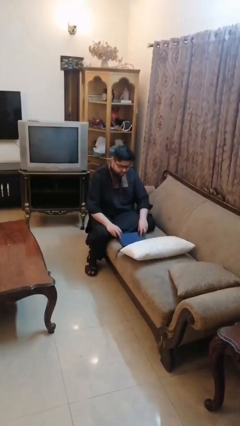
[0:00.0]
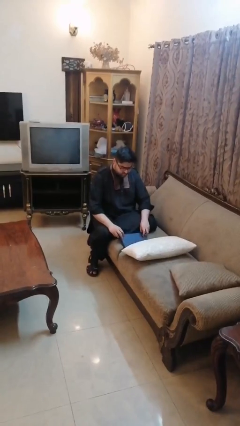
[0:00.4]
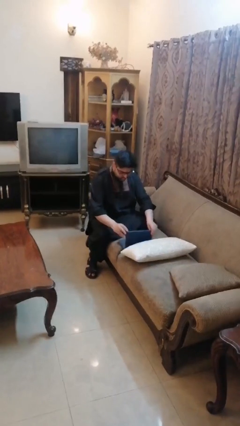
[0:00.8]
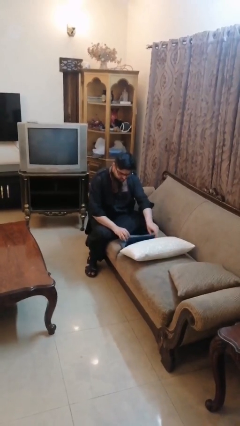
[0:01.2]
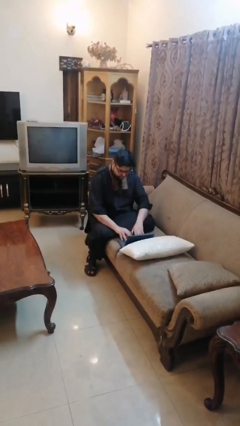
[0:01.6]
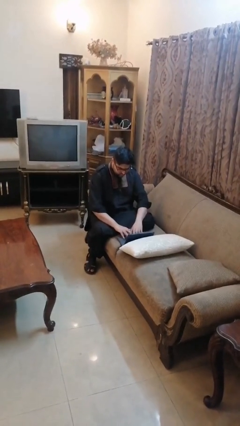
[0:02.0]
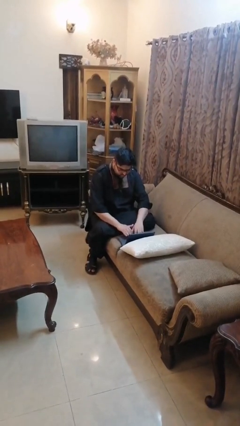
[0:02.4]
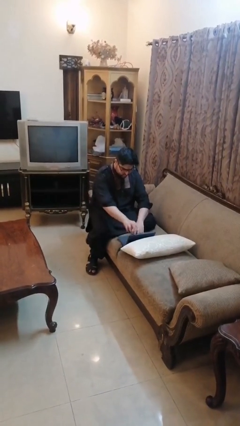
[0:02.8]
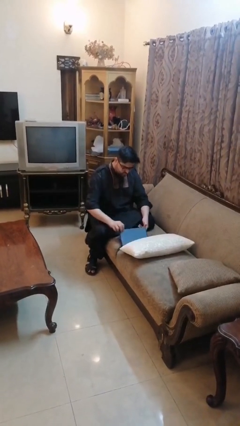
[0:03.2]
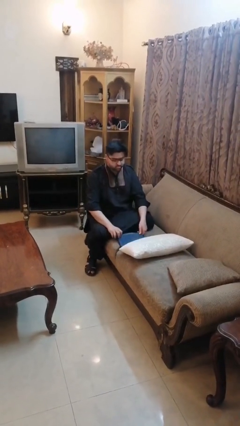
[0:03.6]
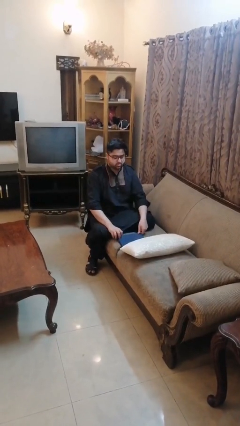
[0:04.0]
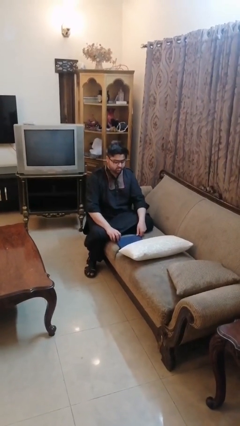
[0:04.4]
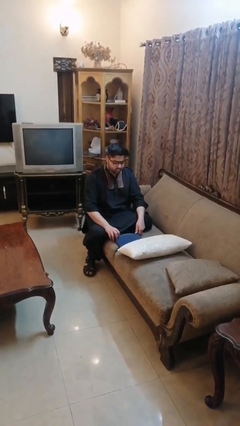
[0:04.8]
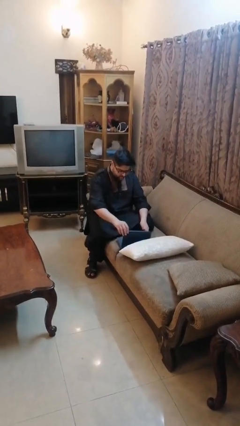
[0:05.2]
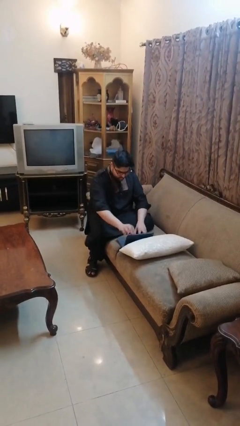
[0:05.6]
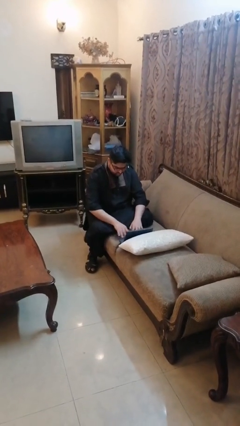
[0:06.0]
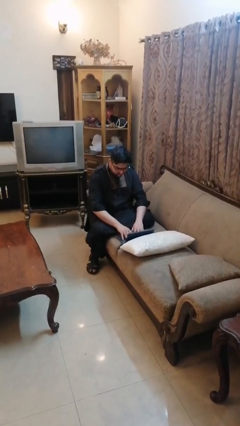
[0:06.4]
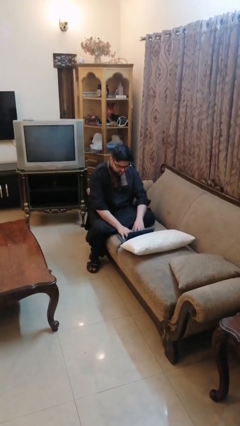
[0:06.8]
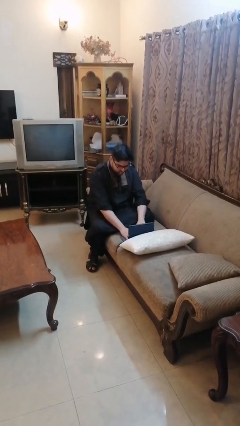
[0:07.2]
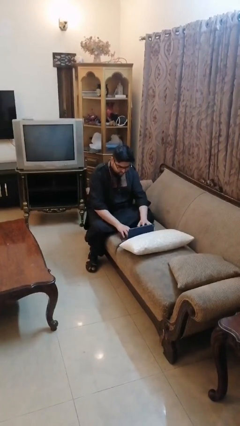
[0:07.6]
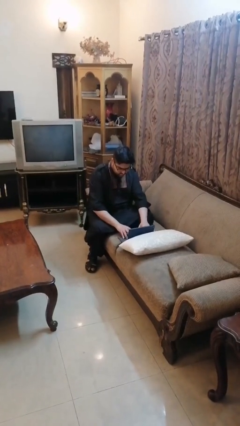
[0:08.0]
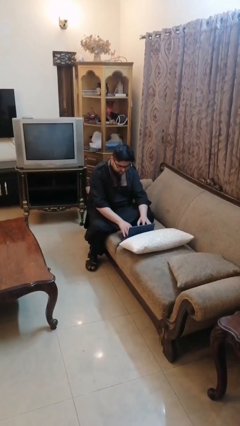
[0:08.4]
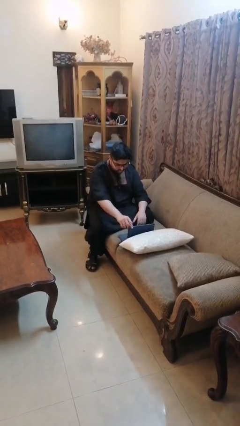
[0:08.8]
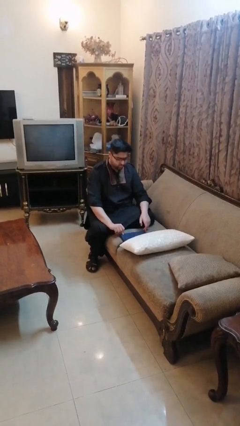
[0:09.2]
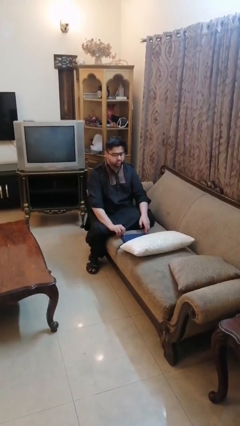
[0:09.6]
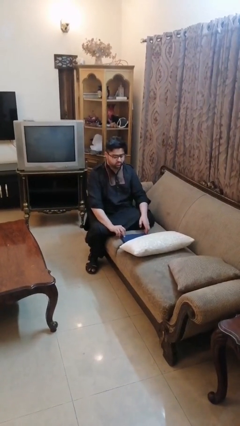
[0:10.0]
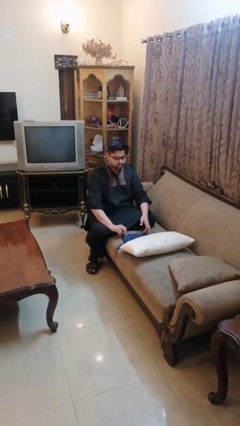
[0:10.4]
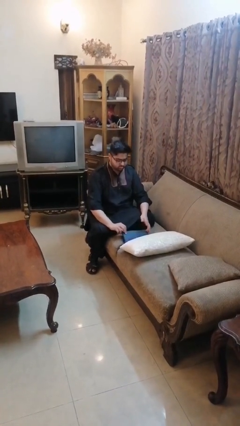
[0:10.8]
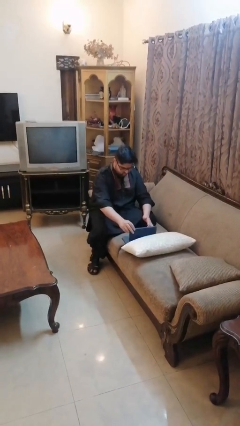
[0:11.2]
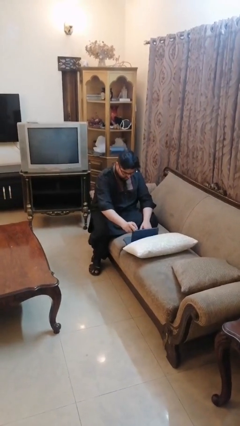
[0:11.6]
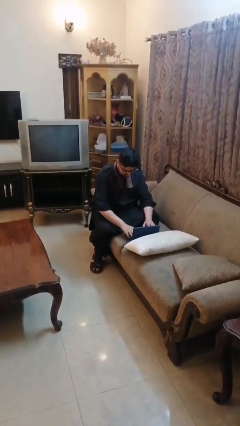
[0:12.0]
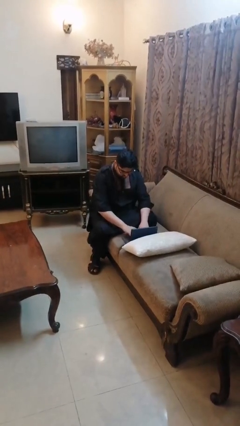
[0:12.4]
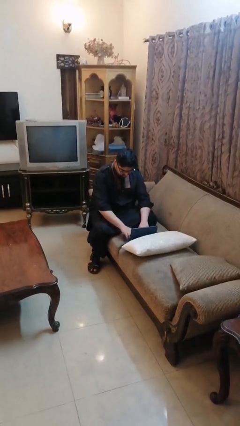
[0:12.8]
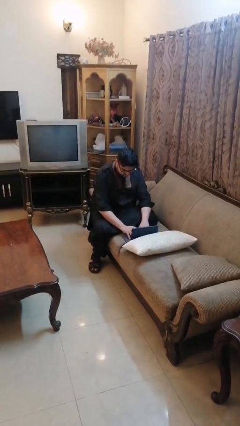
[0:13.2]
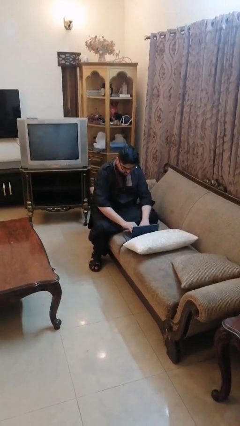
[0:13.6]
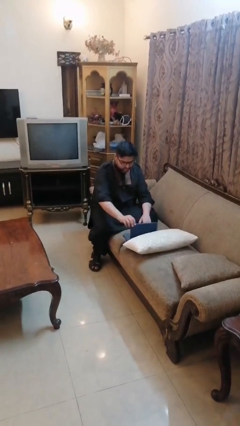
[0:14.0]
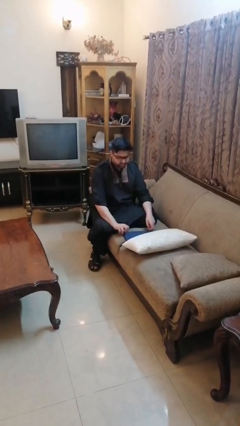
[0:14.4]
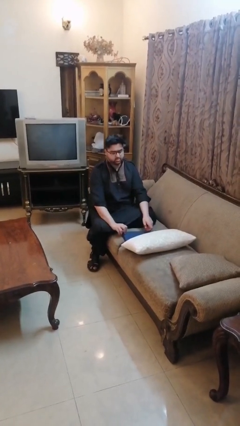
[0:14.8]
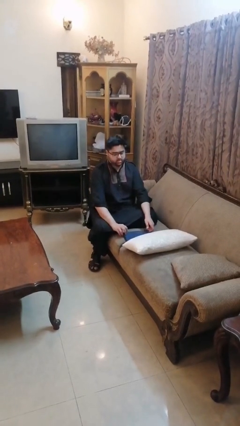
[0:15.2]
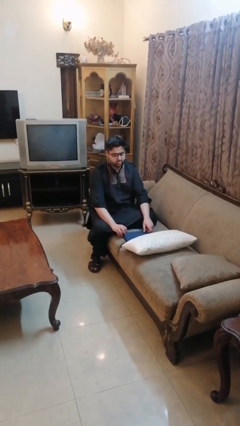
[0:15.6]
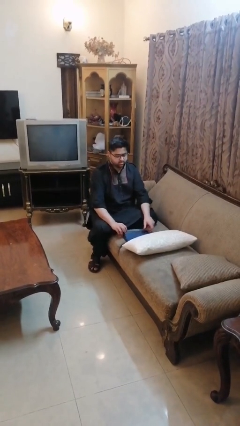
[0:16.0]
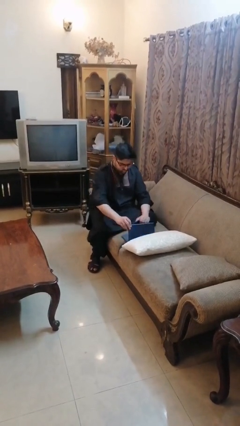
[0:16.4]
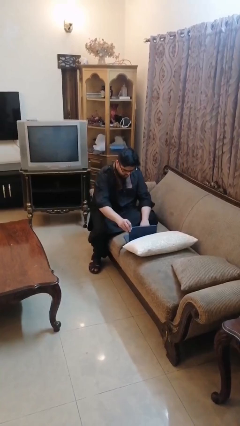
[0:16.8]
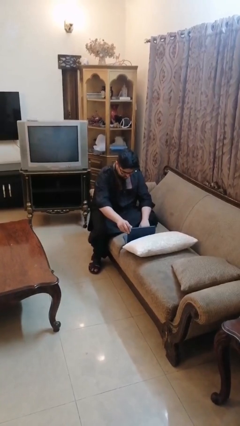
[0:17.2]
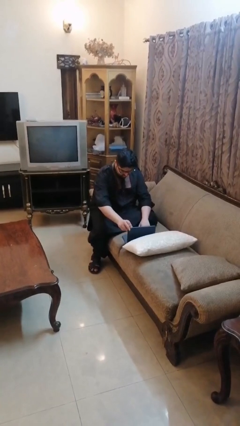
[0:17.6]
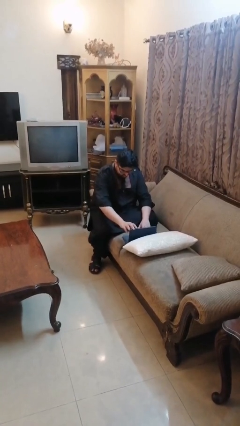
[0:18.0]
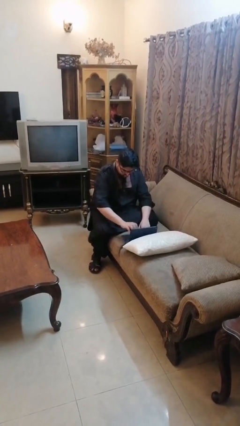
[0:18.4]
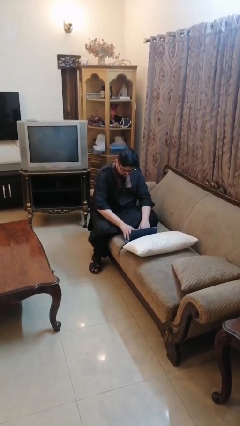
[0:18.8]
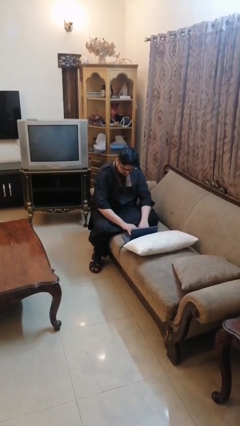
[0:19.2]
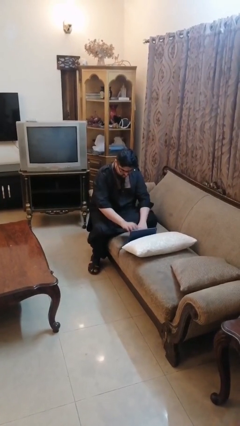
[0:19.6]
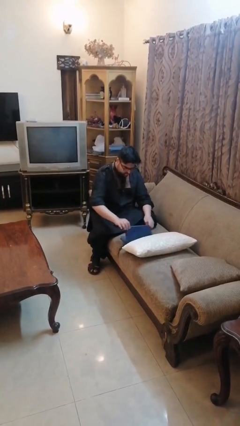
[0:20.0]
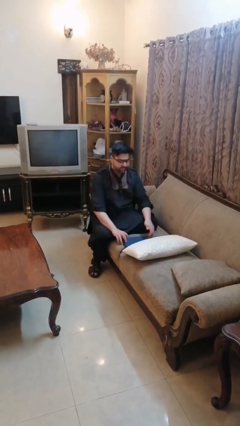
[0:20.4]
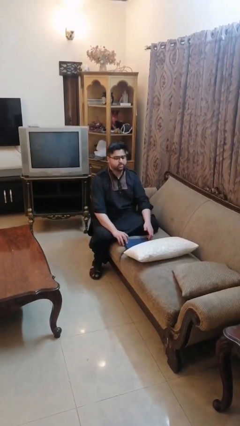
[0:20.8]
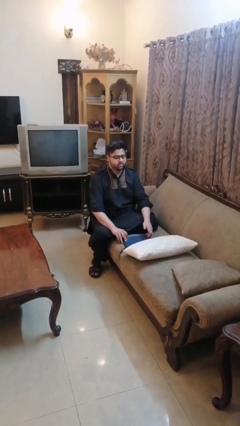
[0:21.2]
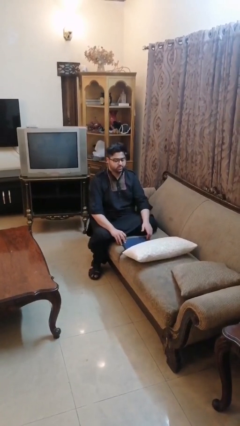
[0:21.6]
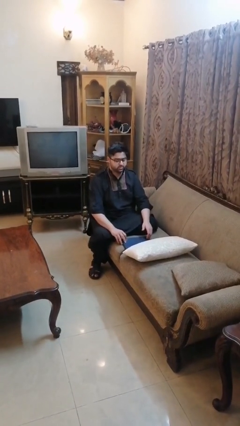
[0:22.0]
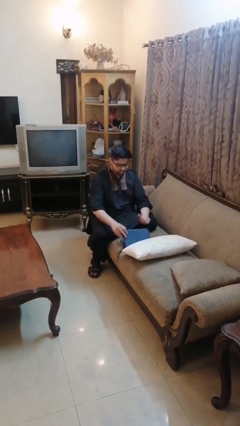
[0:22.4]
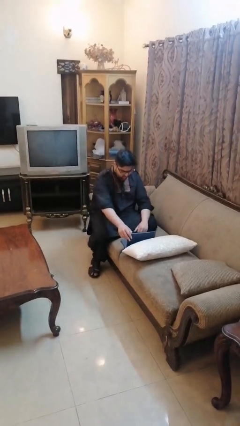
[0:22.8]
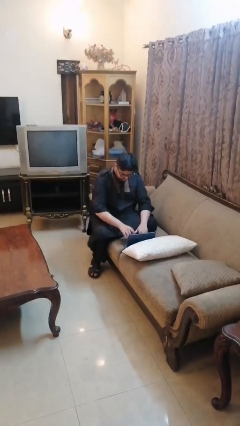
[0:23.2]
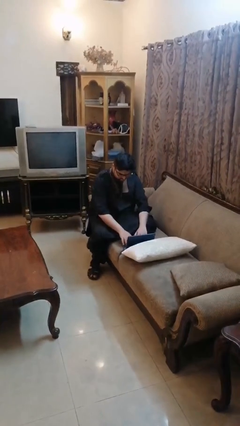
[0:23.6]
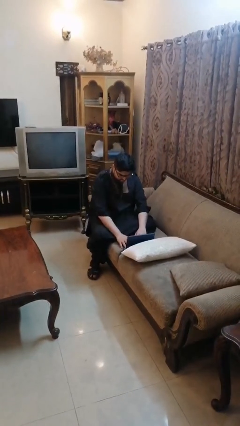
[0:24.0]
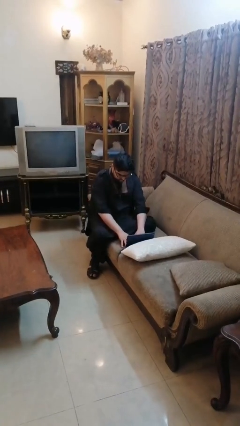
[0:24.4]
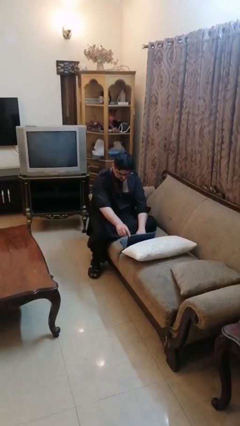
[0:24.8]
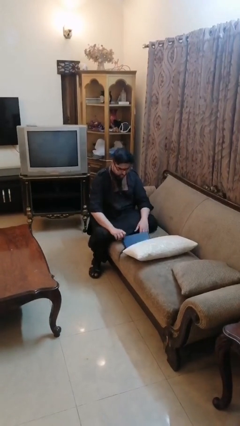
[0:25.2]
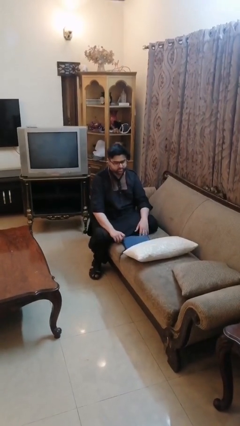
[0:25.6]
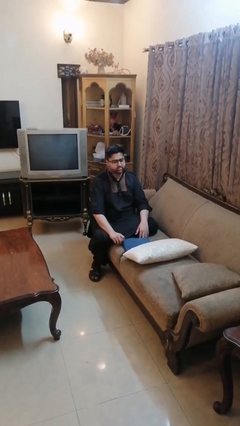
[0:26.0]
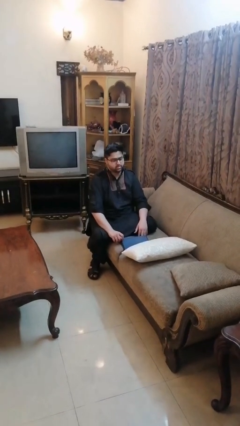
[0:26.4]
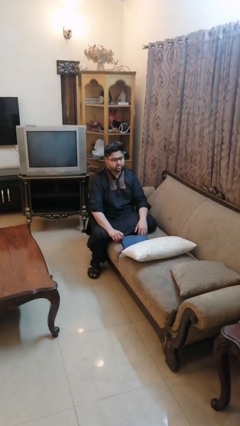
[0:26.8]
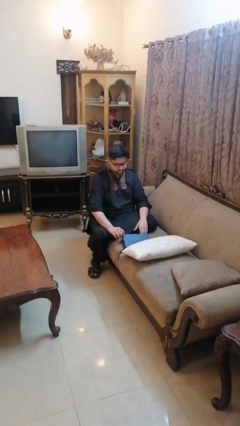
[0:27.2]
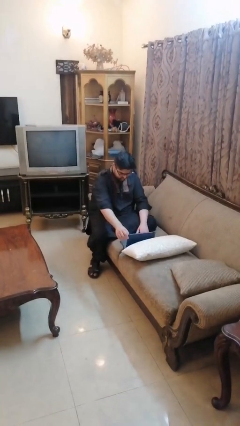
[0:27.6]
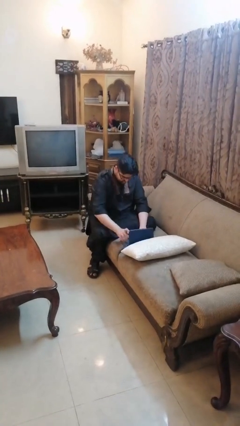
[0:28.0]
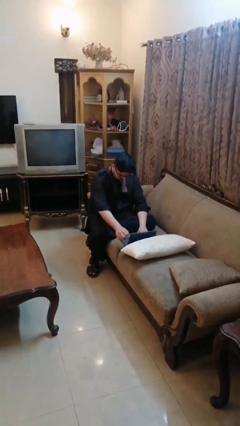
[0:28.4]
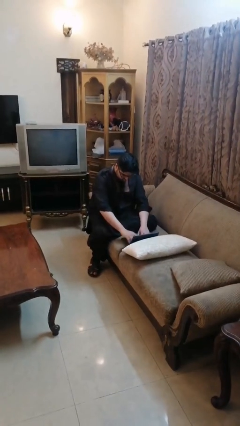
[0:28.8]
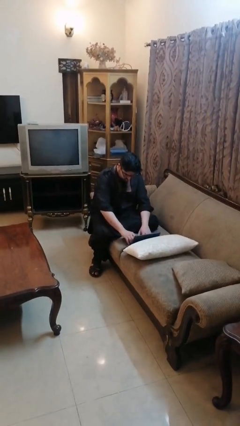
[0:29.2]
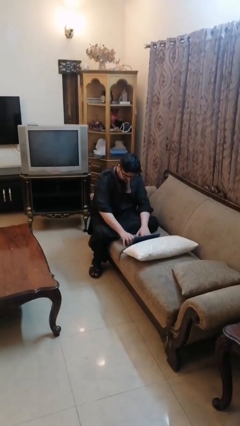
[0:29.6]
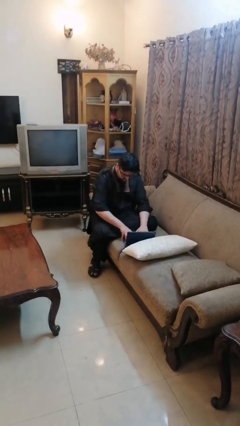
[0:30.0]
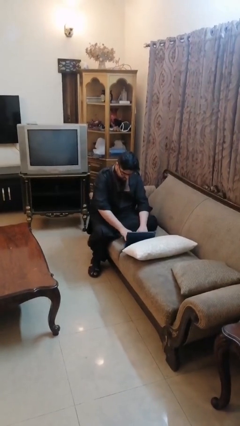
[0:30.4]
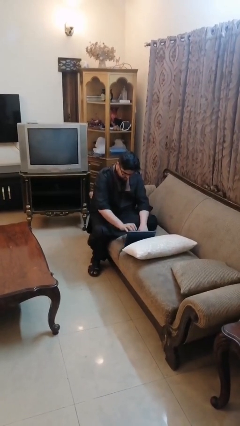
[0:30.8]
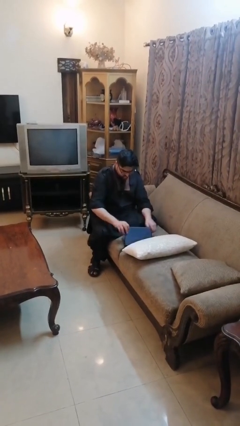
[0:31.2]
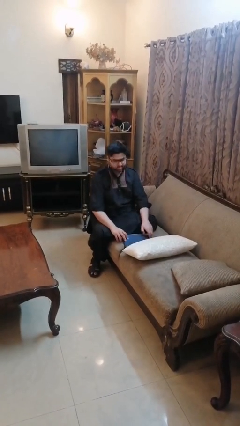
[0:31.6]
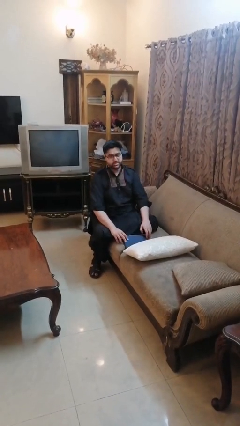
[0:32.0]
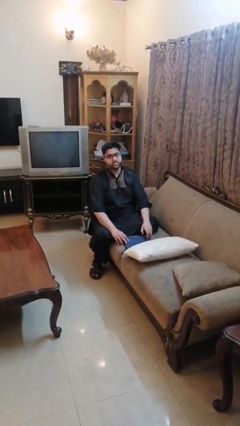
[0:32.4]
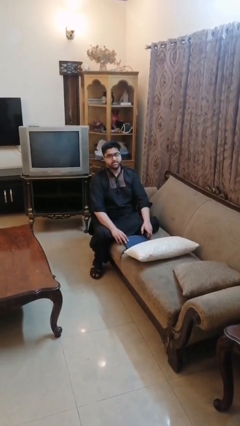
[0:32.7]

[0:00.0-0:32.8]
person interacts with laptop

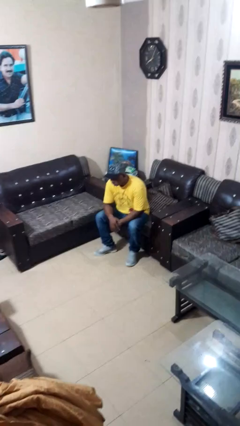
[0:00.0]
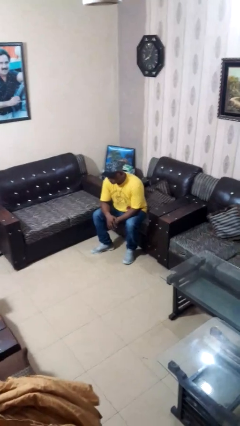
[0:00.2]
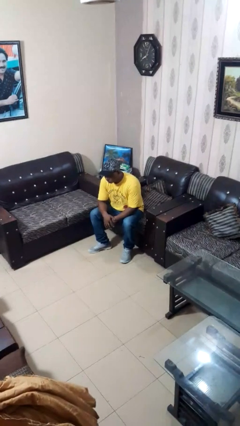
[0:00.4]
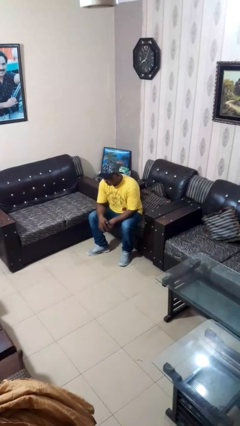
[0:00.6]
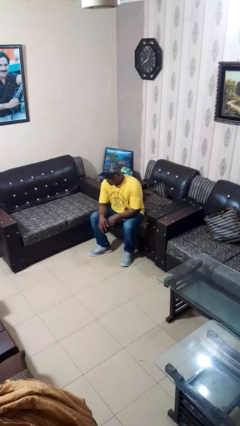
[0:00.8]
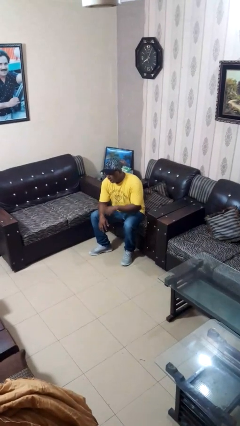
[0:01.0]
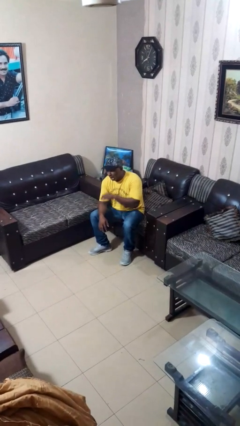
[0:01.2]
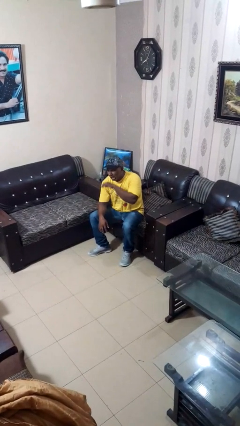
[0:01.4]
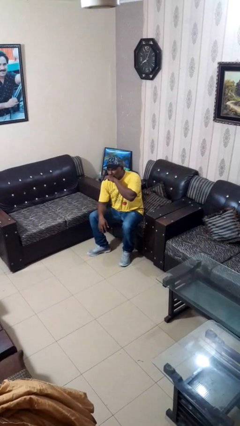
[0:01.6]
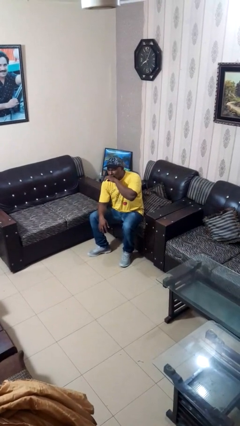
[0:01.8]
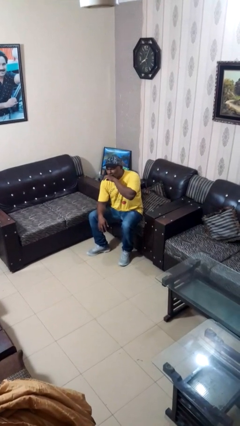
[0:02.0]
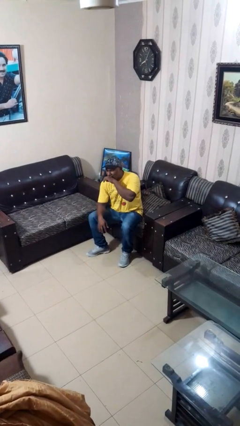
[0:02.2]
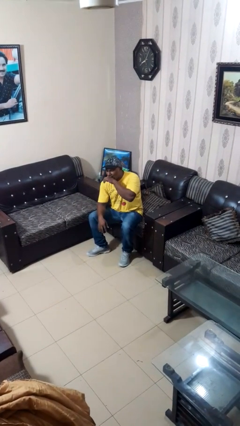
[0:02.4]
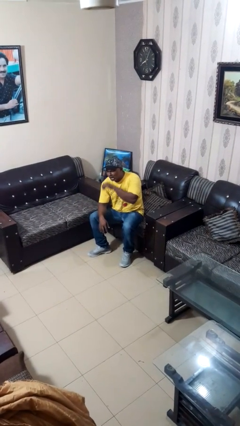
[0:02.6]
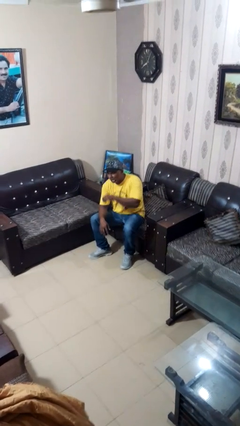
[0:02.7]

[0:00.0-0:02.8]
person yawns
